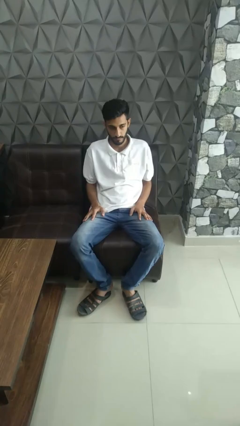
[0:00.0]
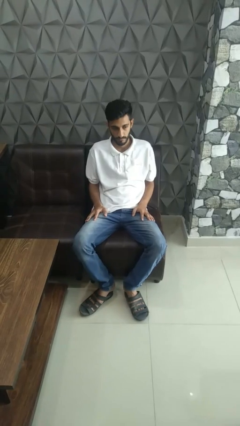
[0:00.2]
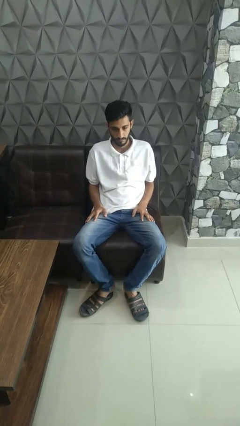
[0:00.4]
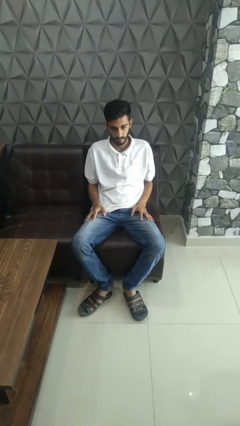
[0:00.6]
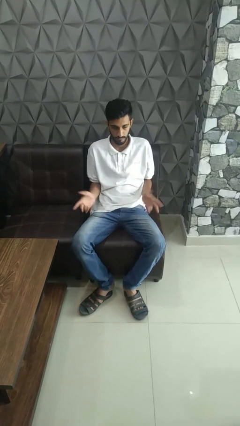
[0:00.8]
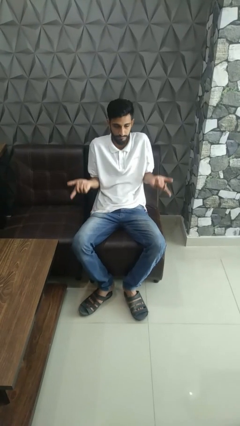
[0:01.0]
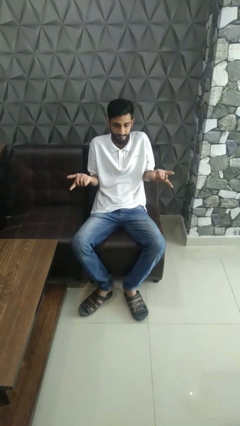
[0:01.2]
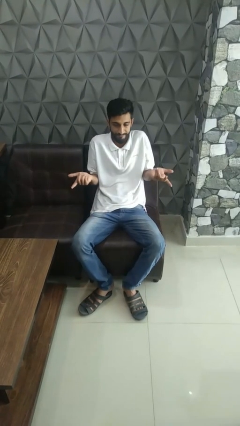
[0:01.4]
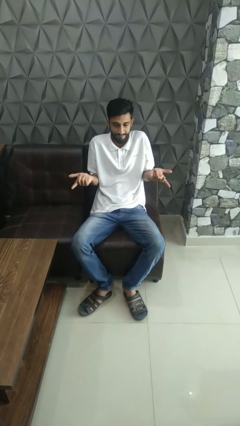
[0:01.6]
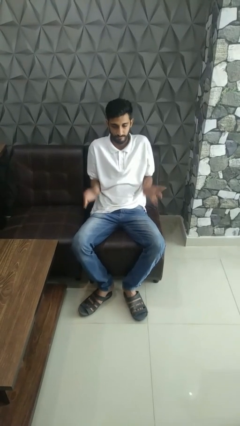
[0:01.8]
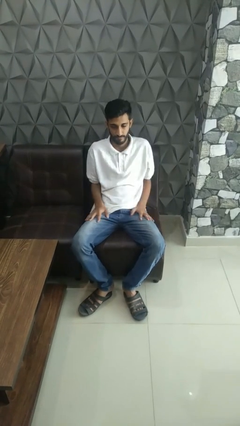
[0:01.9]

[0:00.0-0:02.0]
person shrugs

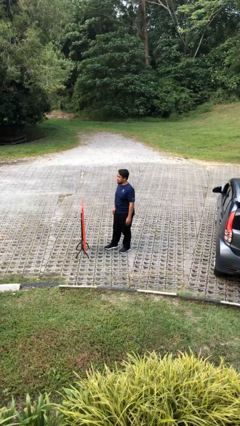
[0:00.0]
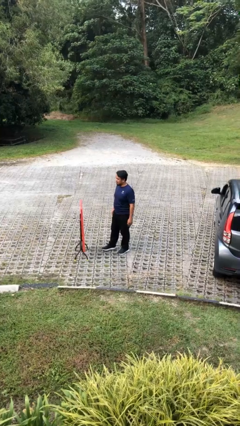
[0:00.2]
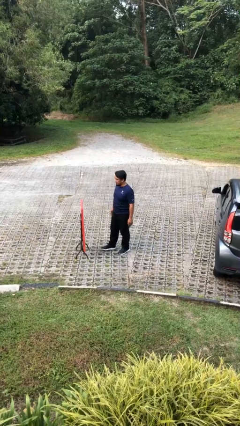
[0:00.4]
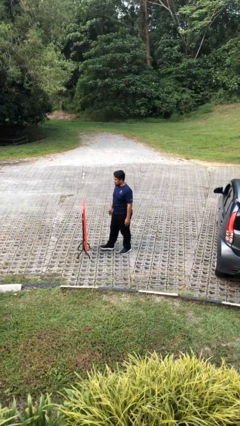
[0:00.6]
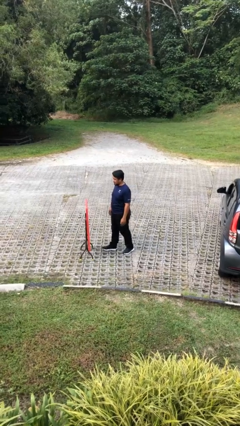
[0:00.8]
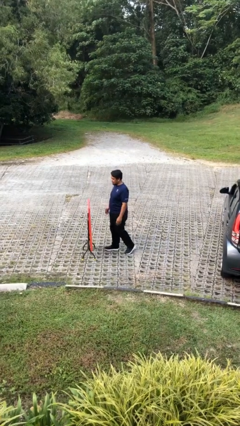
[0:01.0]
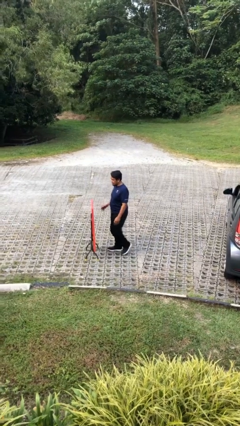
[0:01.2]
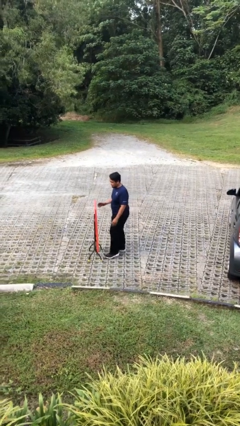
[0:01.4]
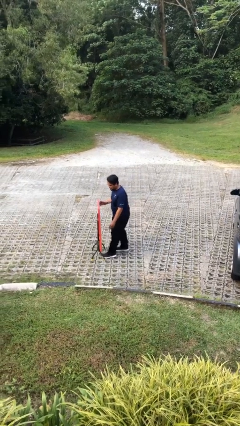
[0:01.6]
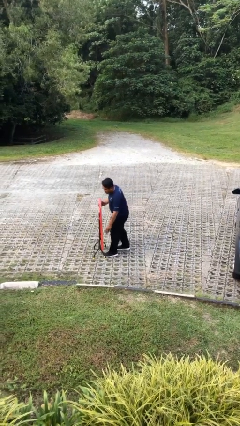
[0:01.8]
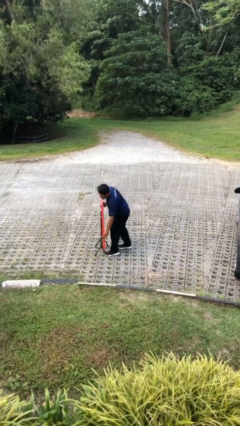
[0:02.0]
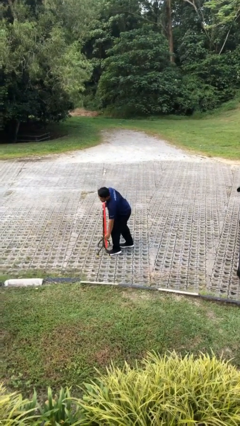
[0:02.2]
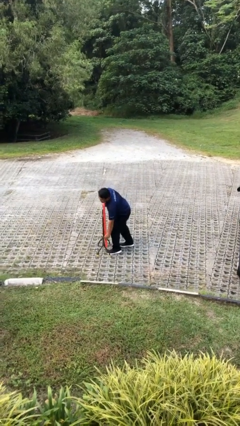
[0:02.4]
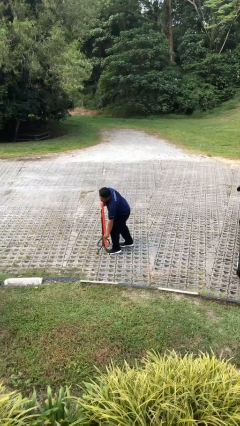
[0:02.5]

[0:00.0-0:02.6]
person picks up object from floor

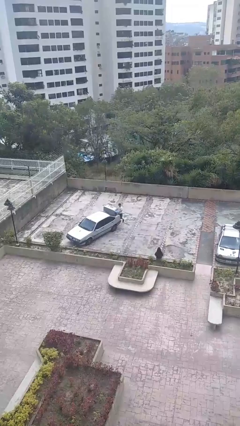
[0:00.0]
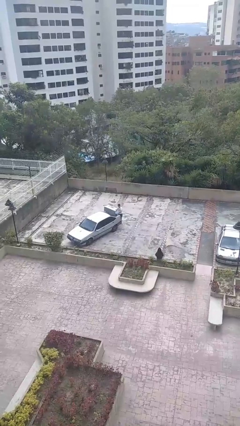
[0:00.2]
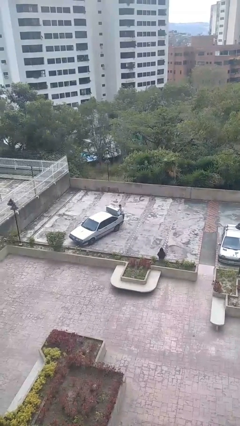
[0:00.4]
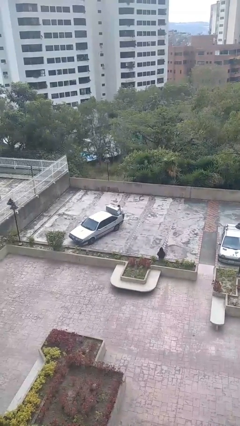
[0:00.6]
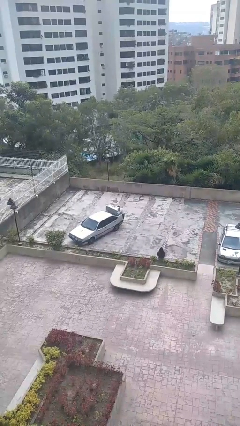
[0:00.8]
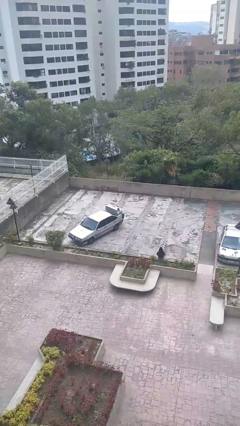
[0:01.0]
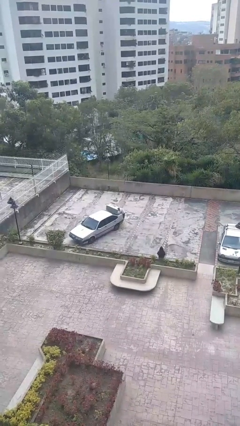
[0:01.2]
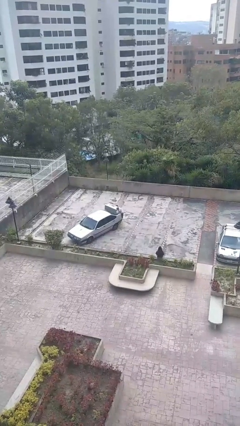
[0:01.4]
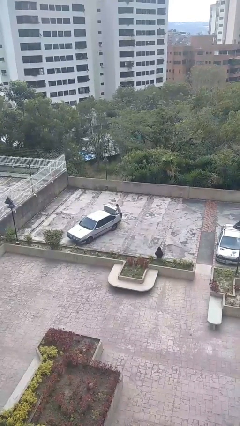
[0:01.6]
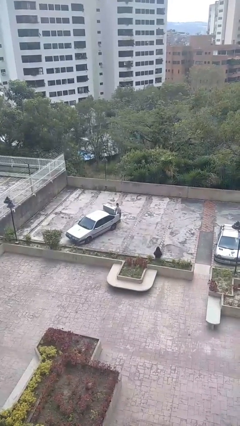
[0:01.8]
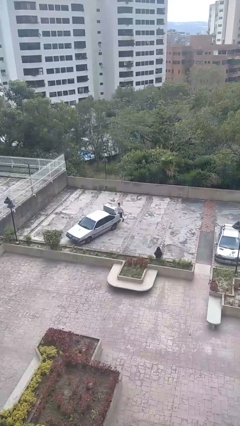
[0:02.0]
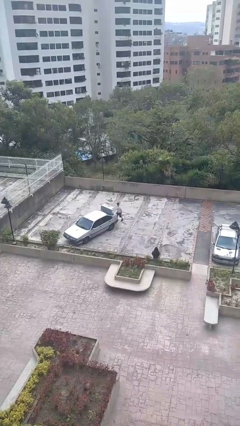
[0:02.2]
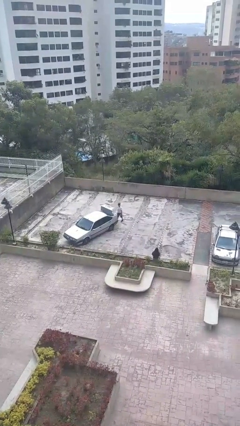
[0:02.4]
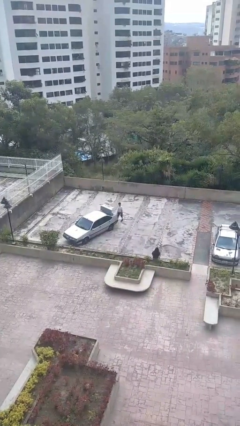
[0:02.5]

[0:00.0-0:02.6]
person loads car

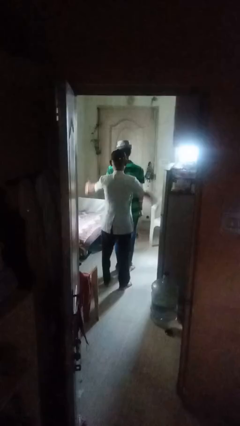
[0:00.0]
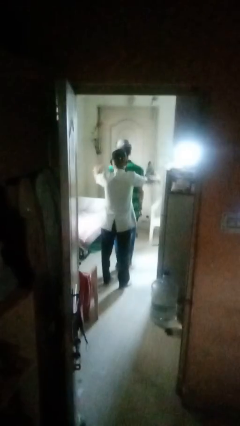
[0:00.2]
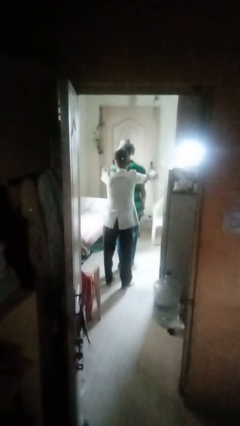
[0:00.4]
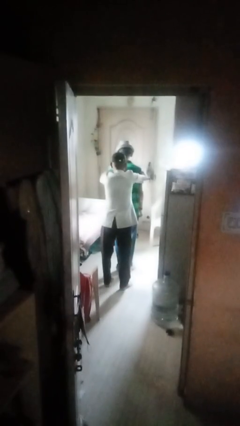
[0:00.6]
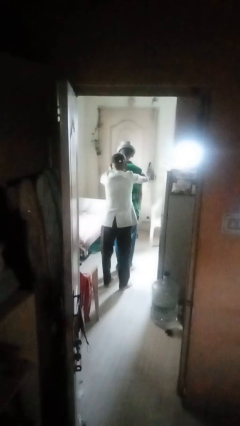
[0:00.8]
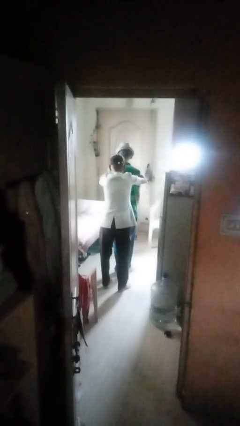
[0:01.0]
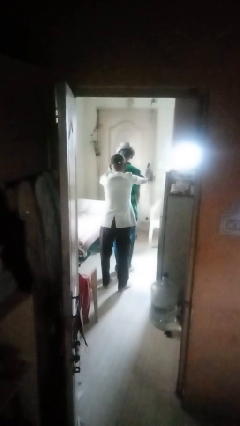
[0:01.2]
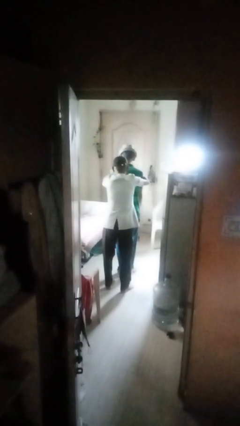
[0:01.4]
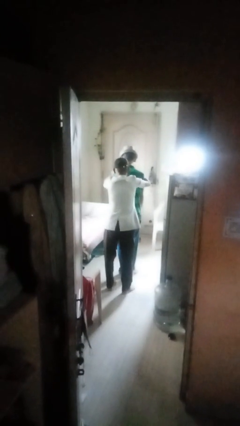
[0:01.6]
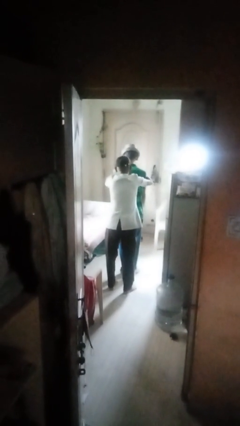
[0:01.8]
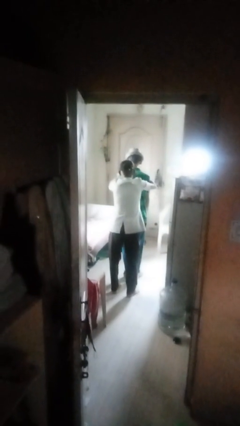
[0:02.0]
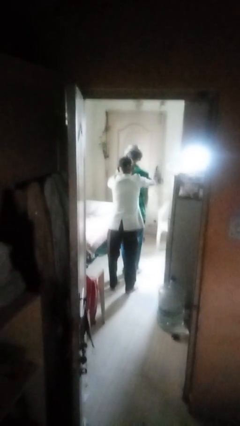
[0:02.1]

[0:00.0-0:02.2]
person hugs person from behind

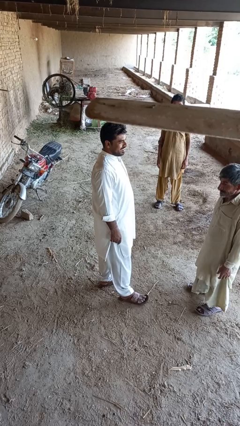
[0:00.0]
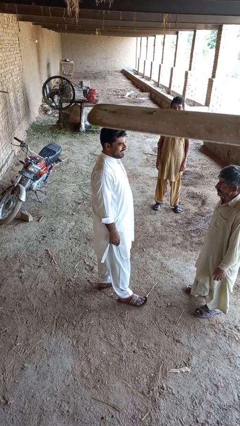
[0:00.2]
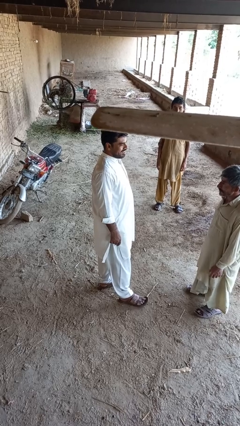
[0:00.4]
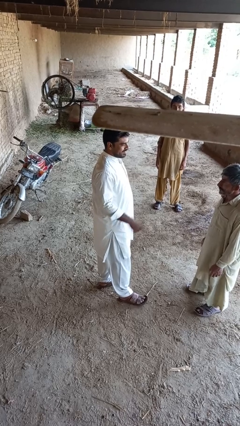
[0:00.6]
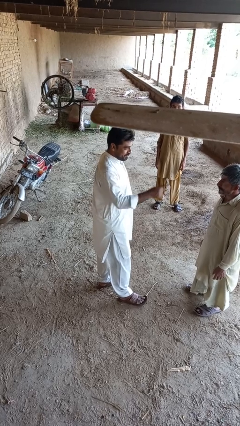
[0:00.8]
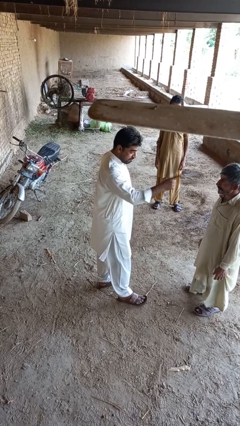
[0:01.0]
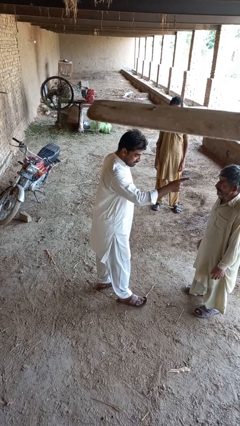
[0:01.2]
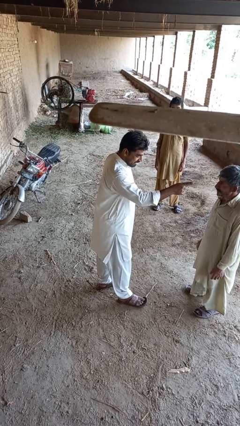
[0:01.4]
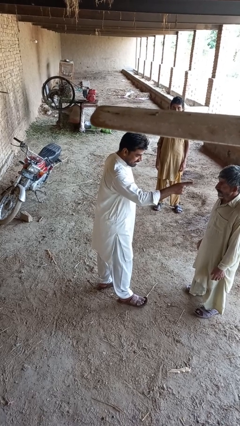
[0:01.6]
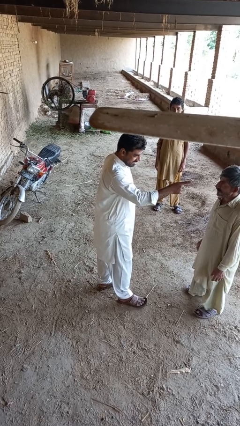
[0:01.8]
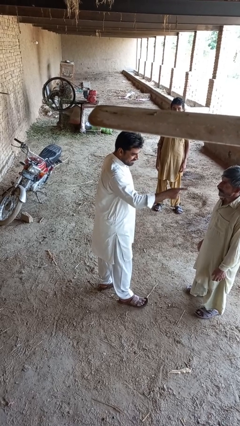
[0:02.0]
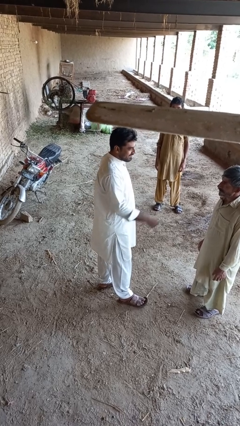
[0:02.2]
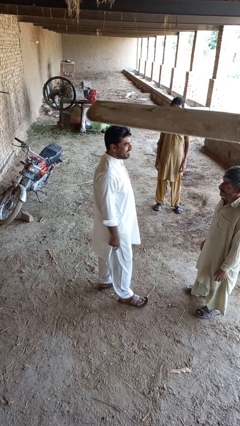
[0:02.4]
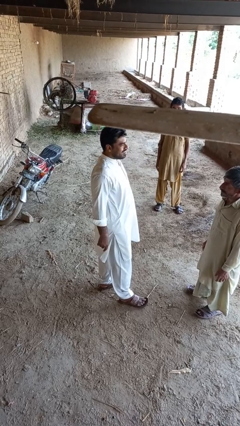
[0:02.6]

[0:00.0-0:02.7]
person points at person

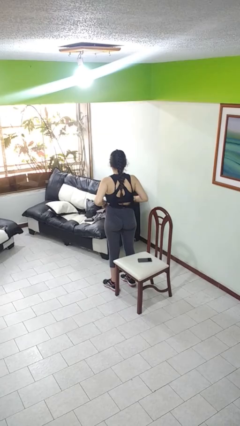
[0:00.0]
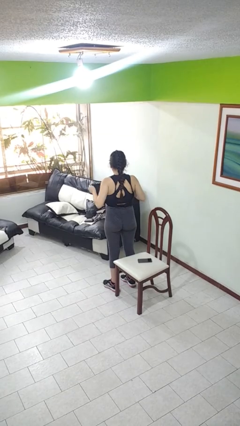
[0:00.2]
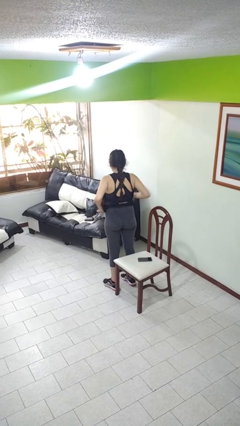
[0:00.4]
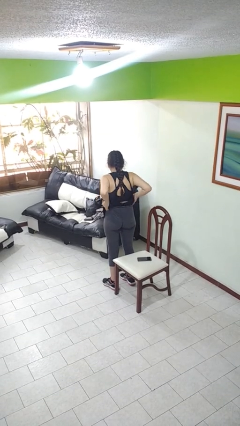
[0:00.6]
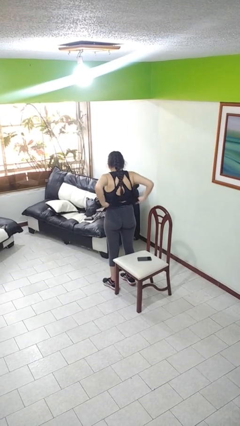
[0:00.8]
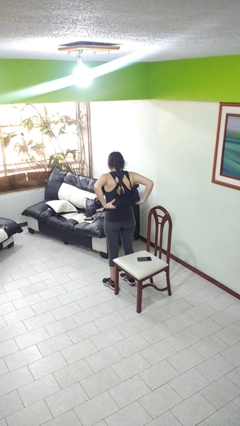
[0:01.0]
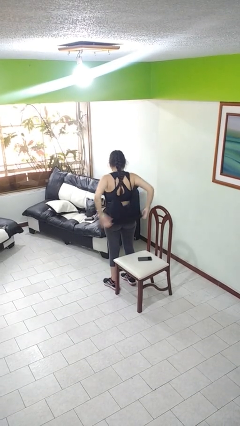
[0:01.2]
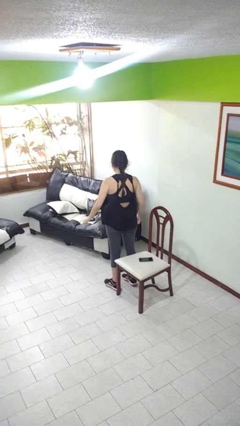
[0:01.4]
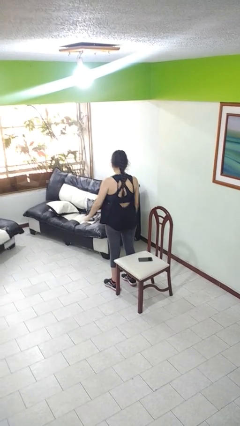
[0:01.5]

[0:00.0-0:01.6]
person untucks shirt

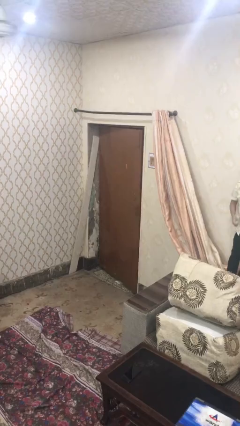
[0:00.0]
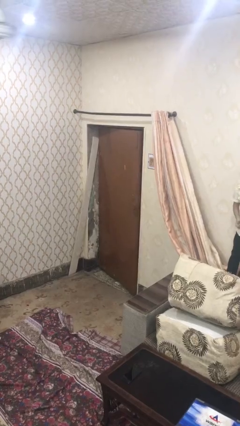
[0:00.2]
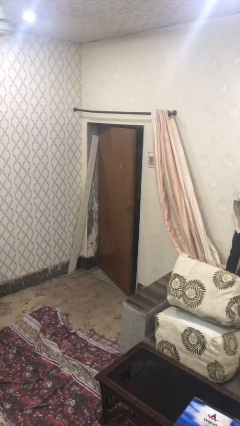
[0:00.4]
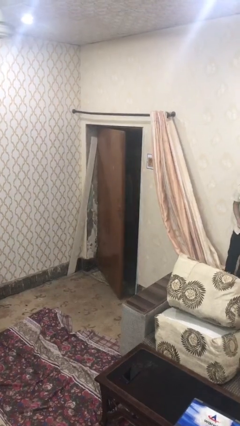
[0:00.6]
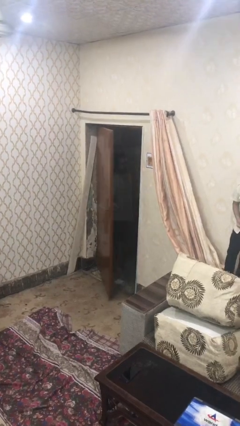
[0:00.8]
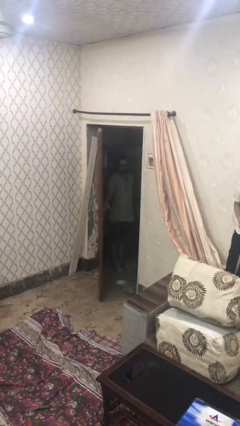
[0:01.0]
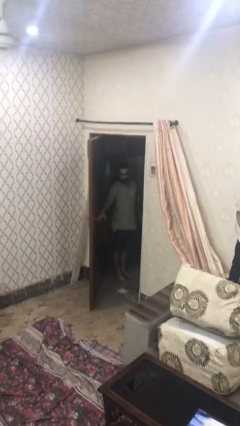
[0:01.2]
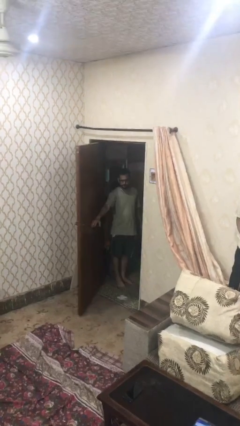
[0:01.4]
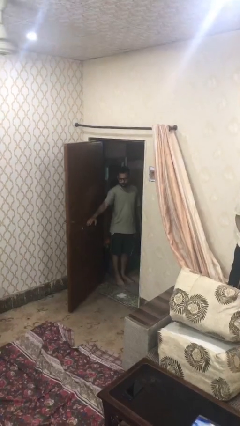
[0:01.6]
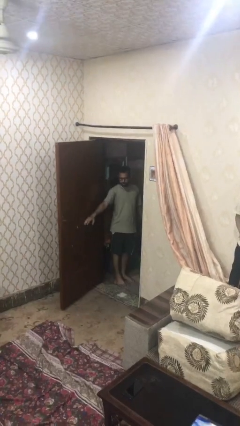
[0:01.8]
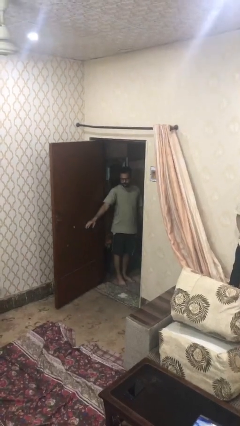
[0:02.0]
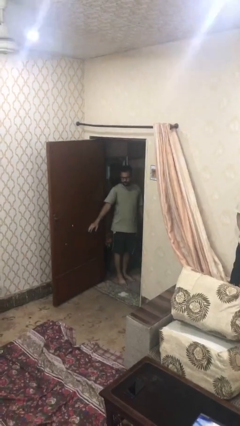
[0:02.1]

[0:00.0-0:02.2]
person opens facility door

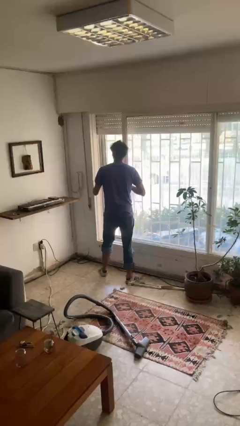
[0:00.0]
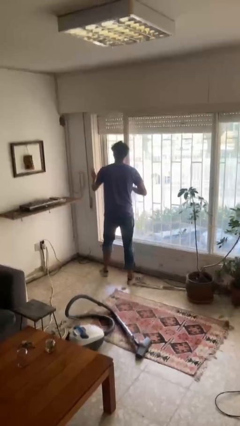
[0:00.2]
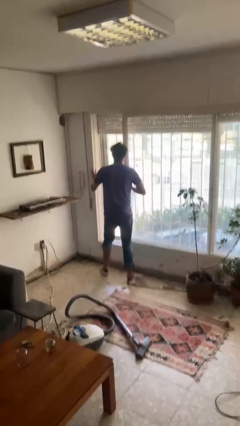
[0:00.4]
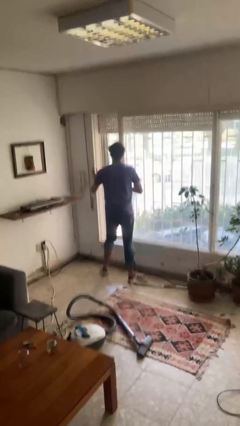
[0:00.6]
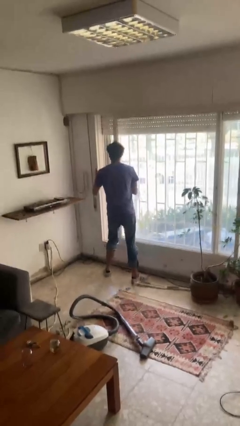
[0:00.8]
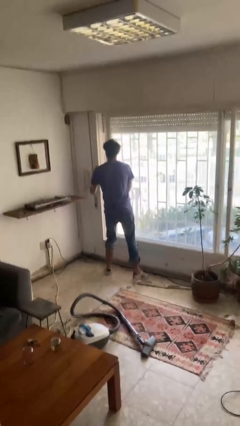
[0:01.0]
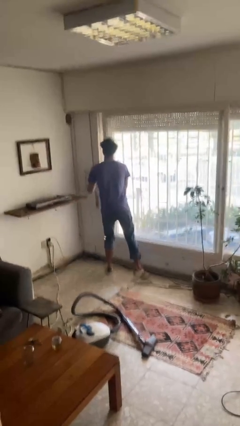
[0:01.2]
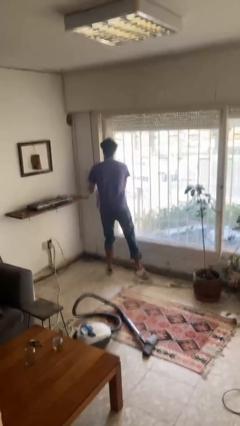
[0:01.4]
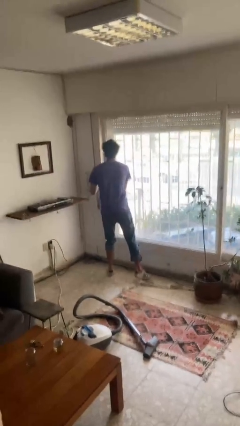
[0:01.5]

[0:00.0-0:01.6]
person closes sliding door
